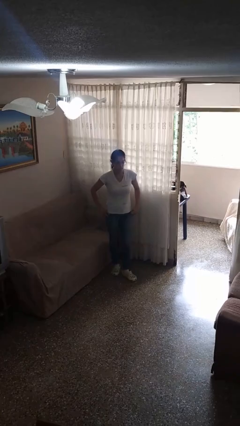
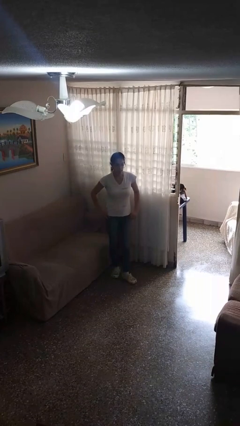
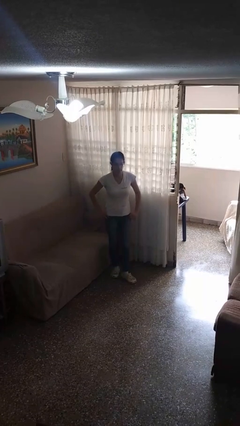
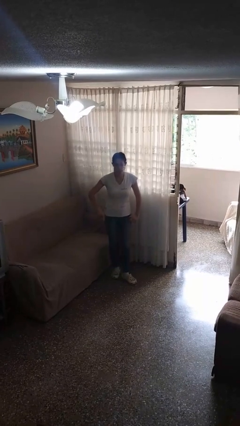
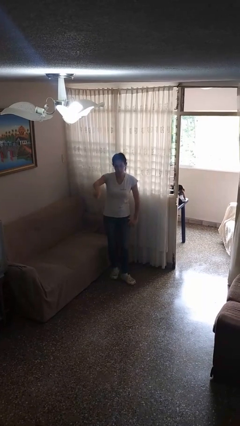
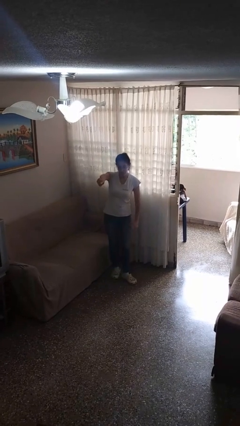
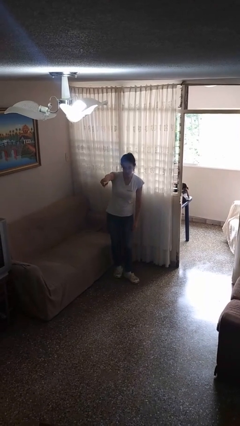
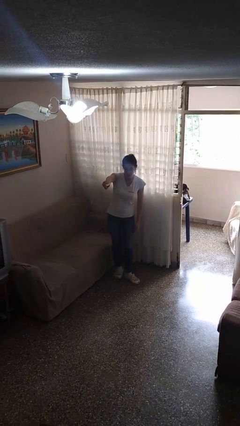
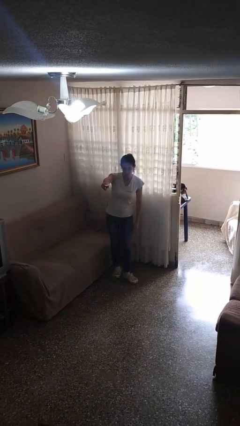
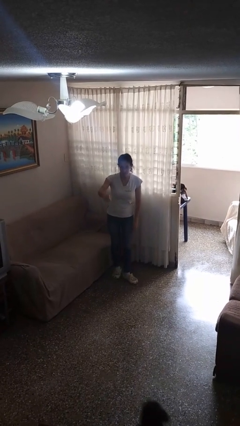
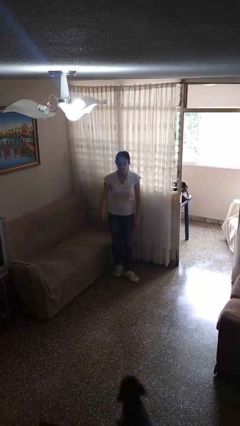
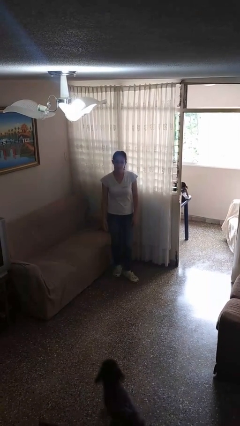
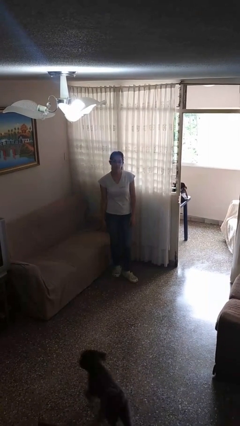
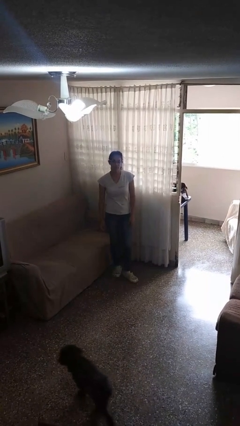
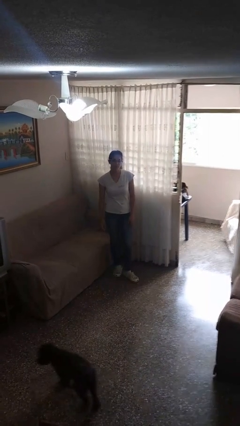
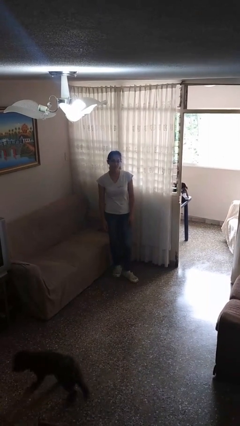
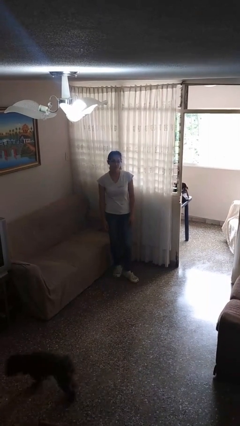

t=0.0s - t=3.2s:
person points at person

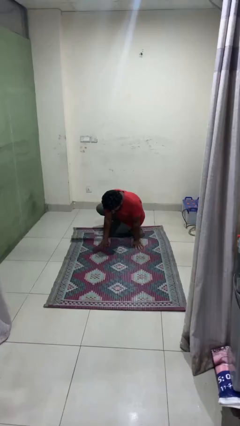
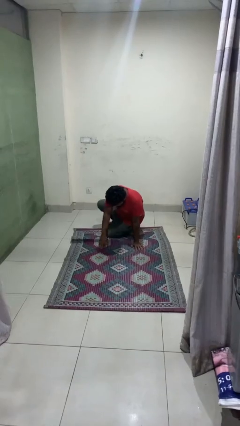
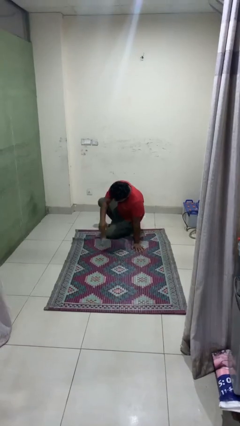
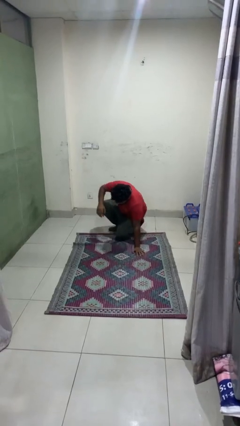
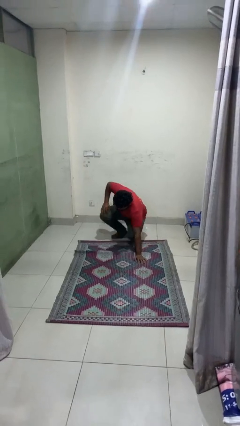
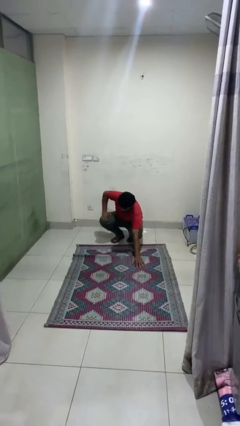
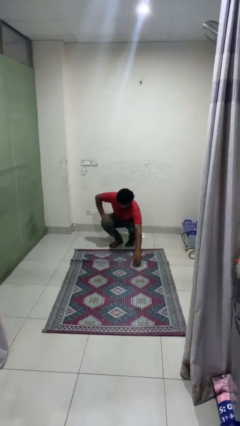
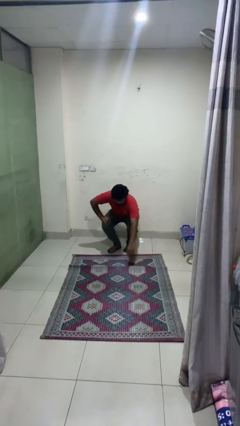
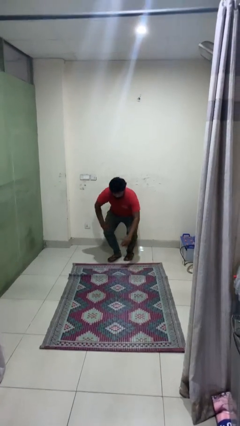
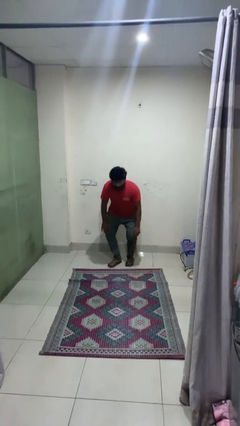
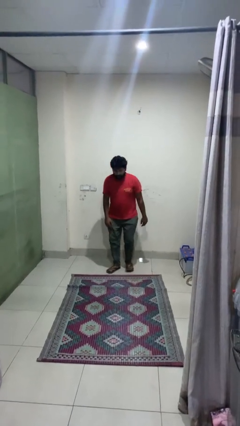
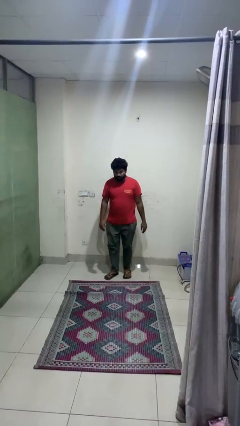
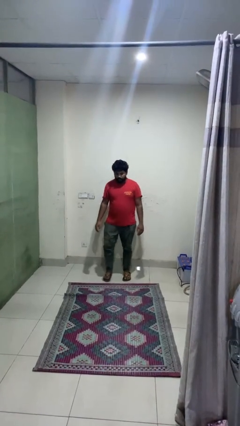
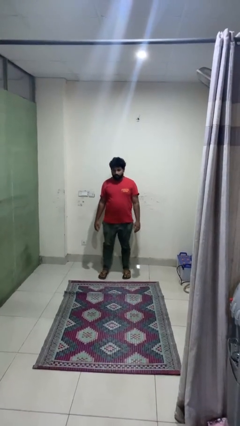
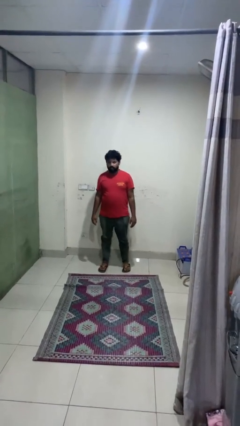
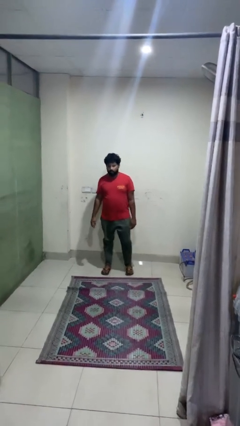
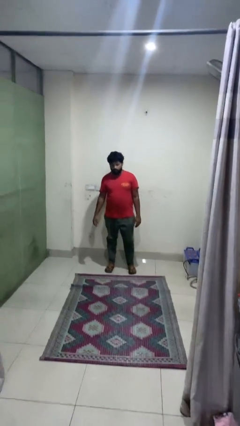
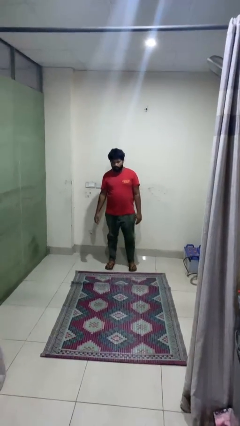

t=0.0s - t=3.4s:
person stands up from floor

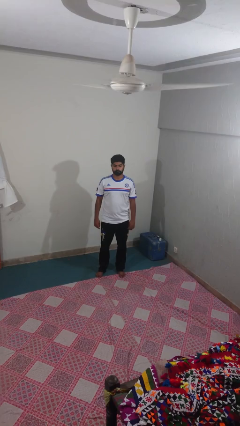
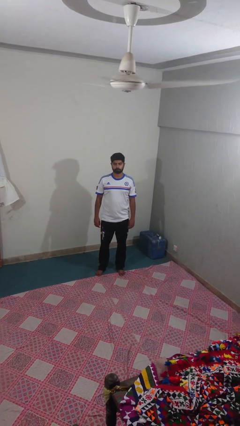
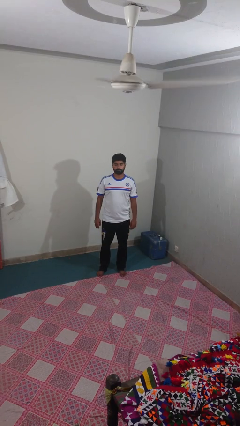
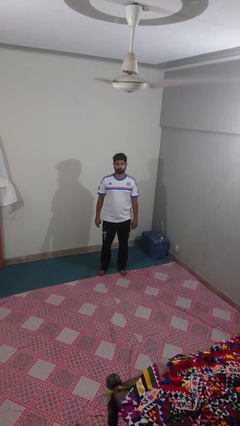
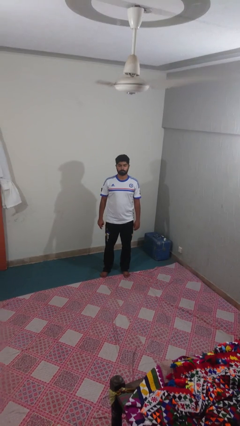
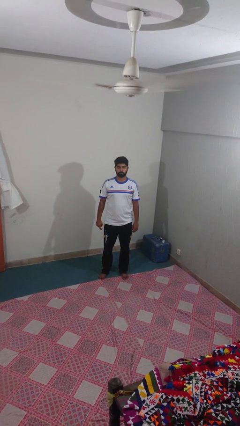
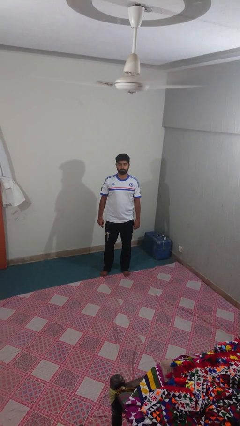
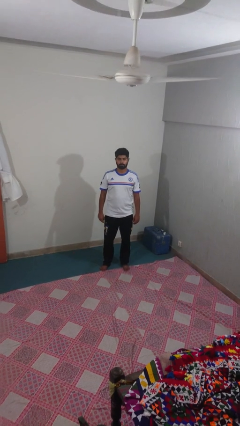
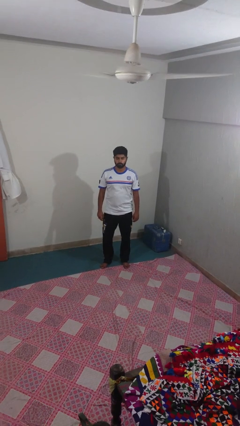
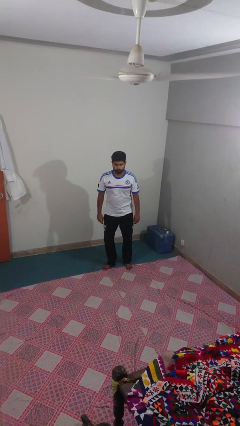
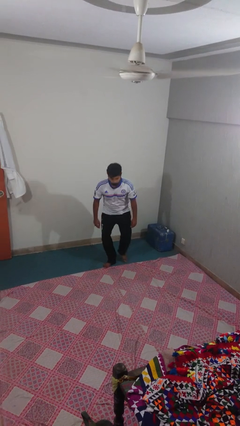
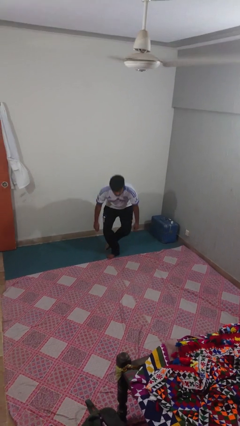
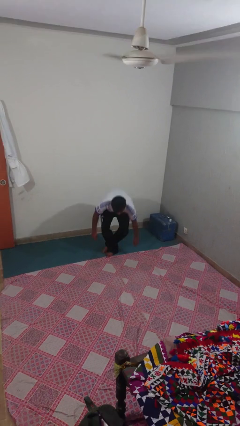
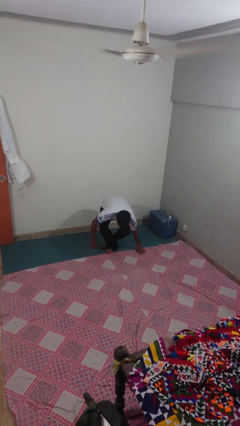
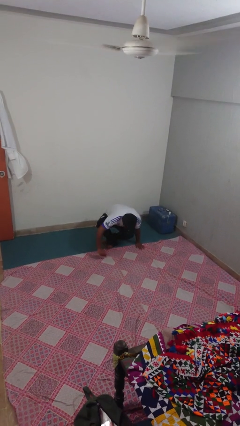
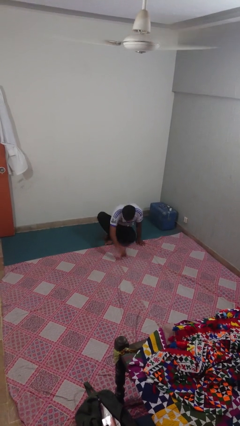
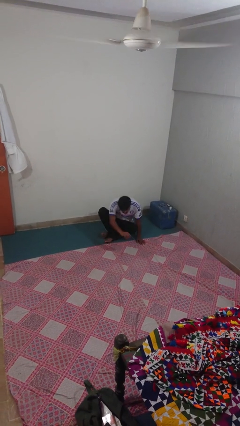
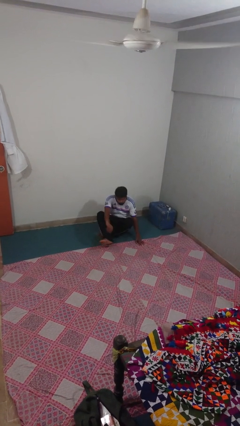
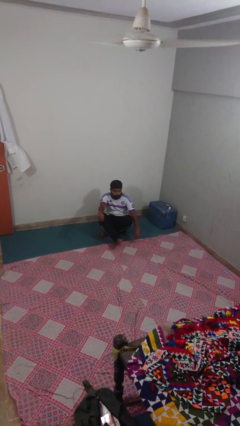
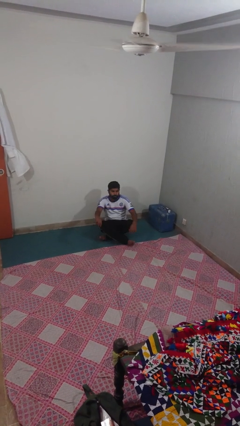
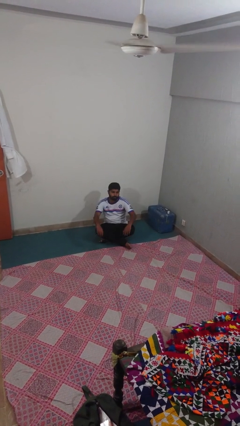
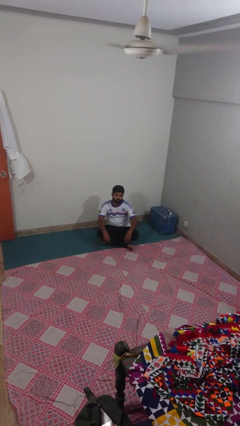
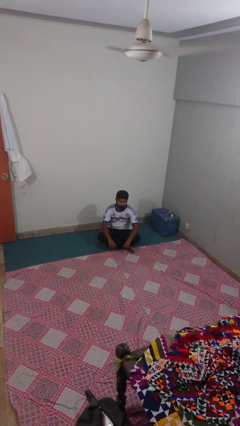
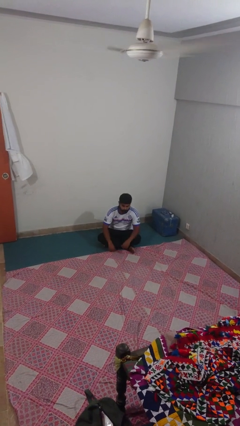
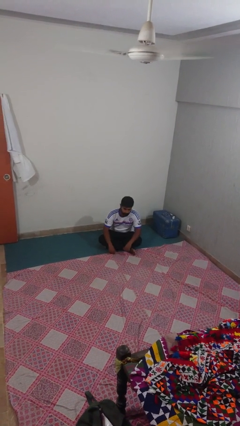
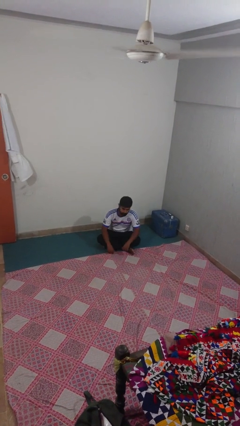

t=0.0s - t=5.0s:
person sits crisscross

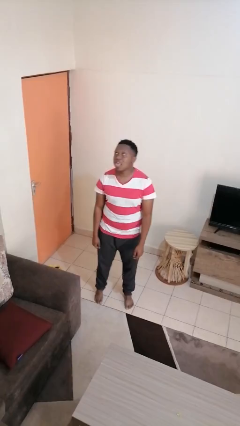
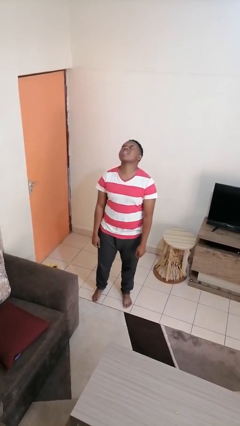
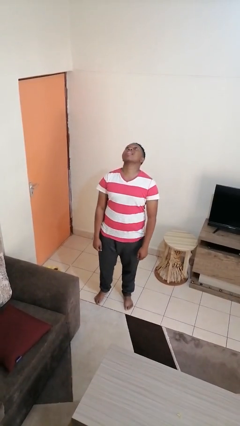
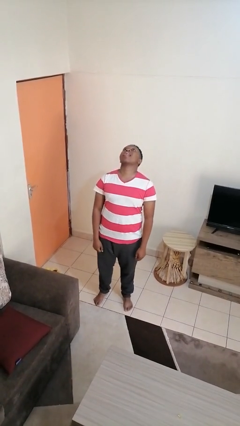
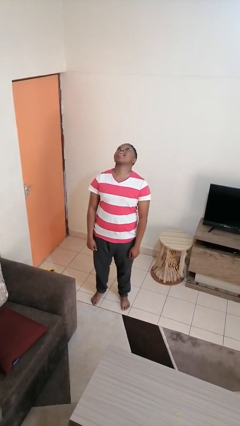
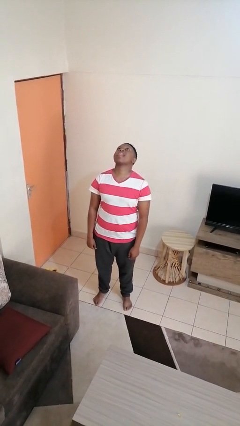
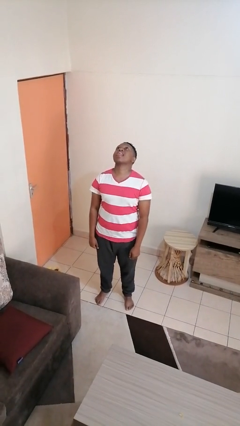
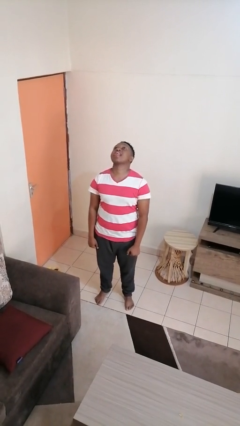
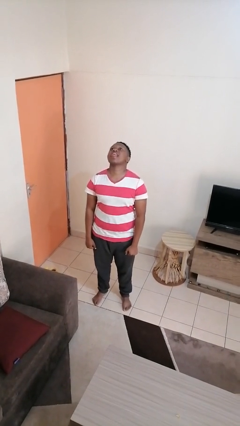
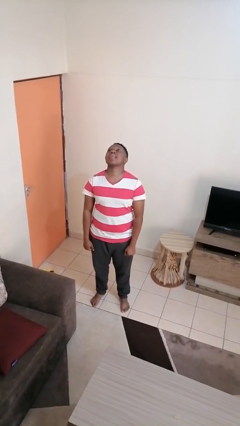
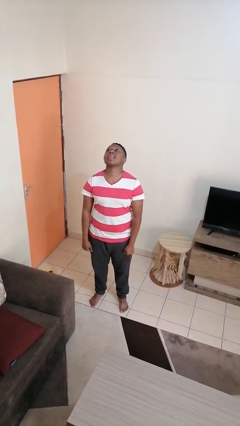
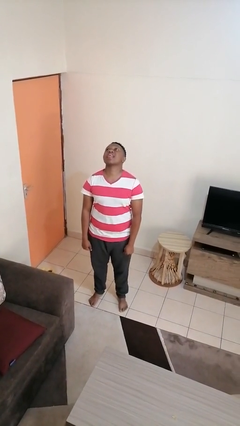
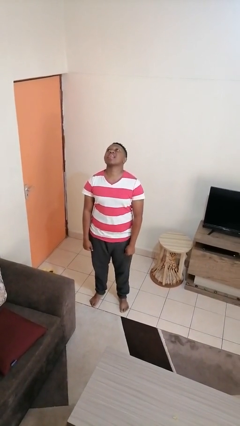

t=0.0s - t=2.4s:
person sticks out tongue

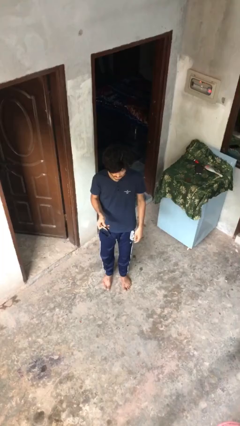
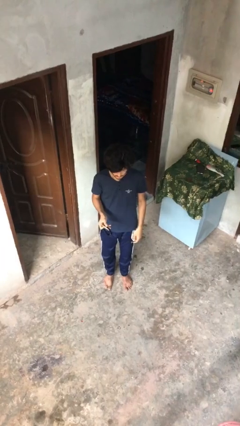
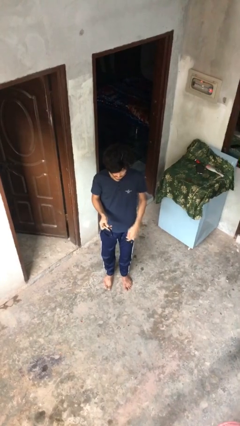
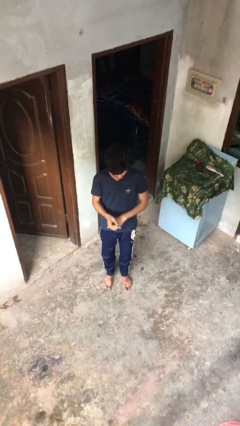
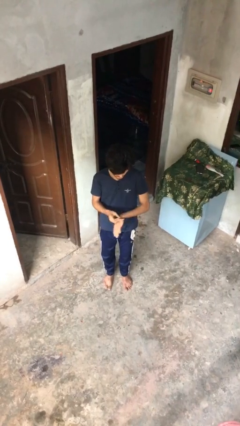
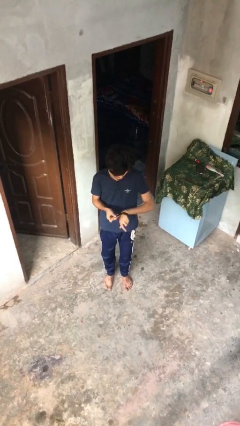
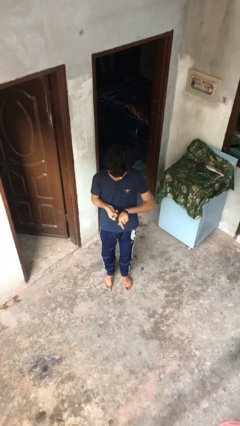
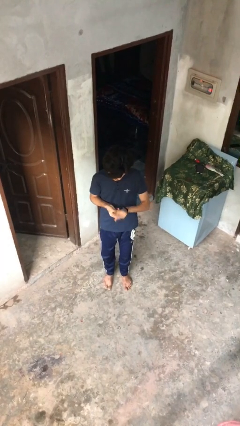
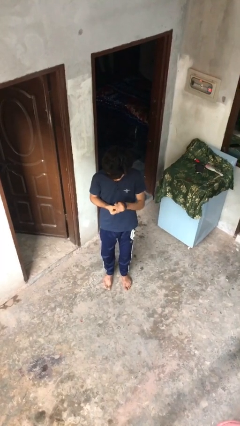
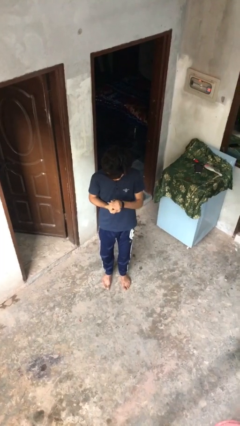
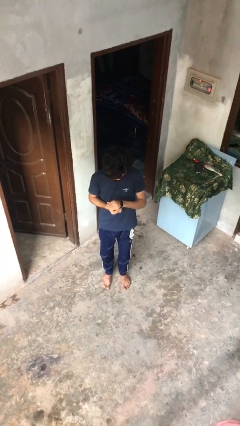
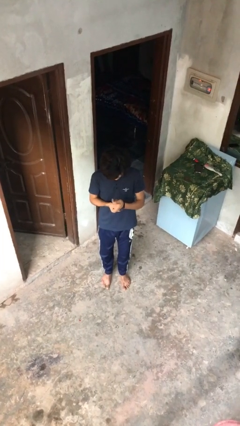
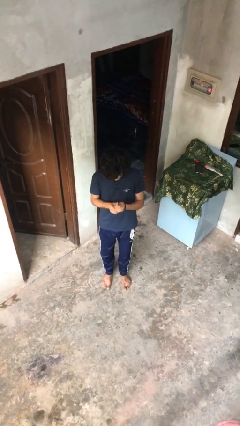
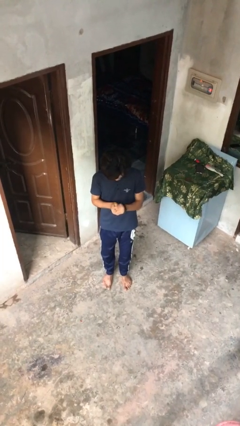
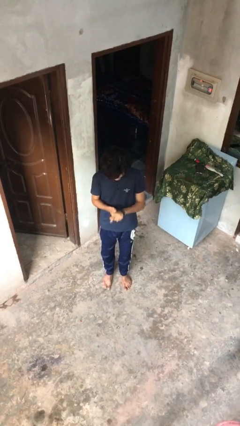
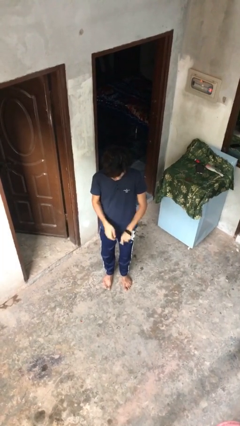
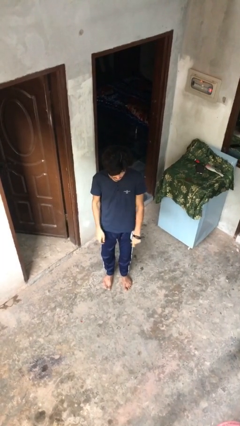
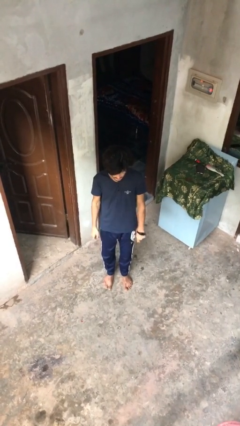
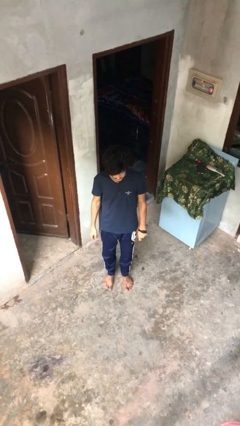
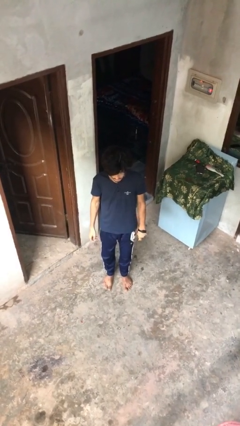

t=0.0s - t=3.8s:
person puts on wristwatch
